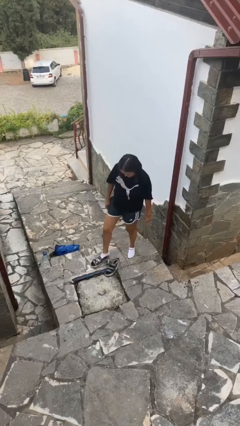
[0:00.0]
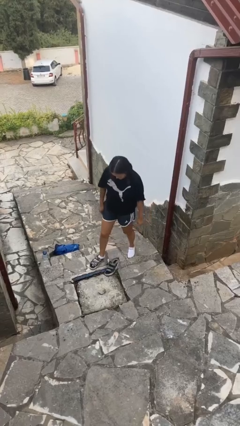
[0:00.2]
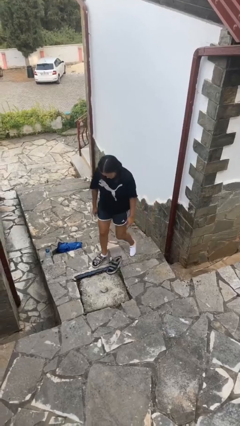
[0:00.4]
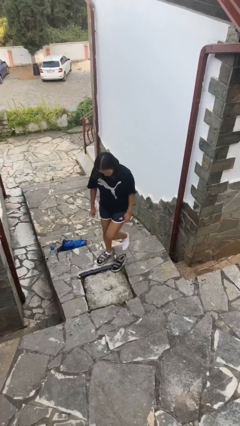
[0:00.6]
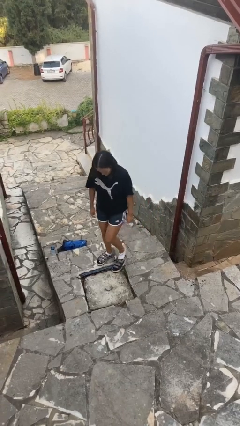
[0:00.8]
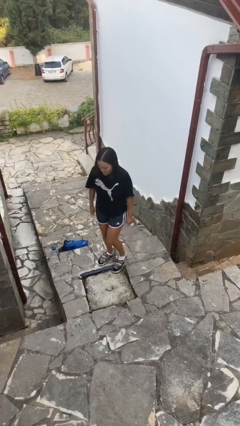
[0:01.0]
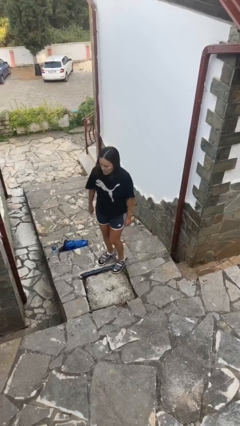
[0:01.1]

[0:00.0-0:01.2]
person puts on shoes

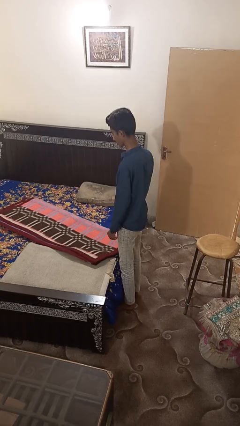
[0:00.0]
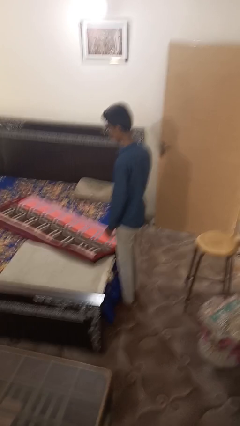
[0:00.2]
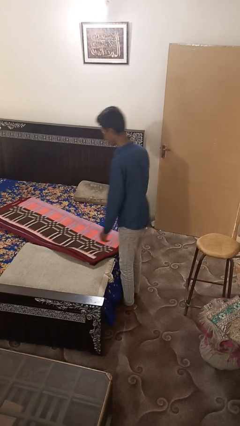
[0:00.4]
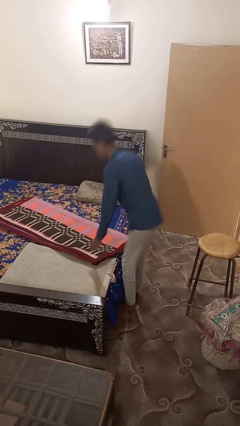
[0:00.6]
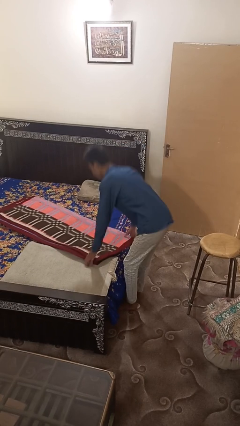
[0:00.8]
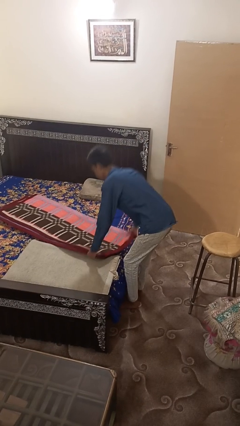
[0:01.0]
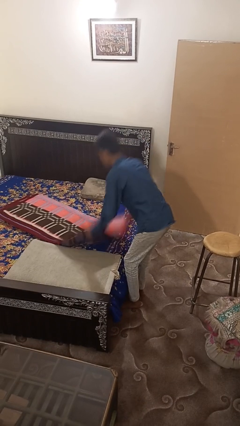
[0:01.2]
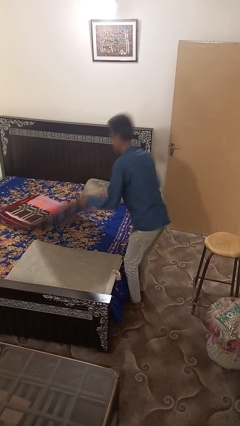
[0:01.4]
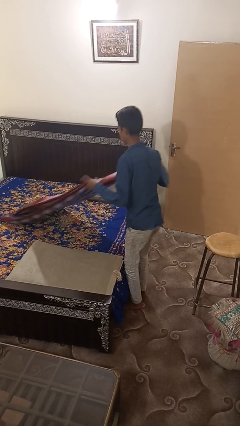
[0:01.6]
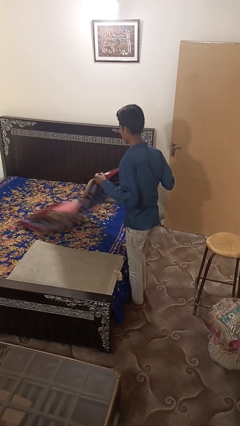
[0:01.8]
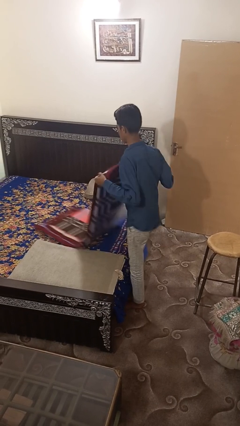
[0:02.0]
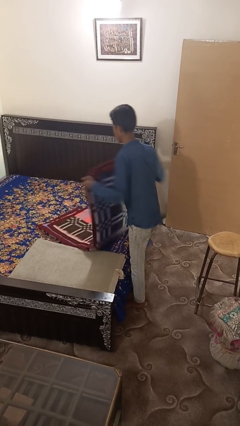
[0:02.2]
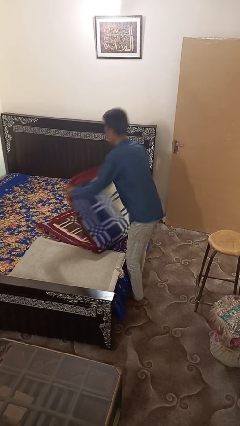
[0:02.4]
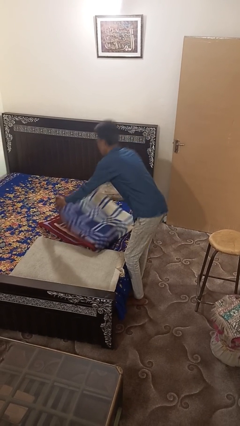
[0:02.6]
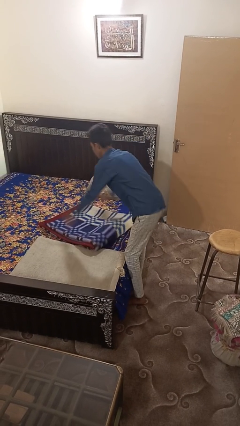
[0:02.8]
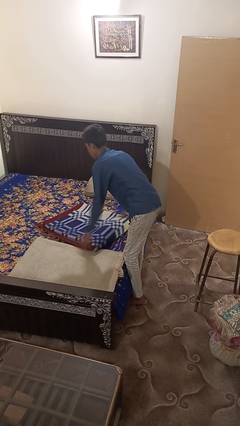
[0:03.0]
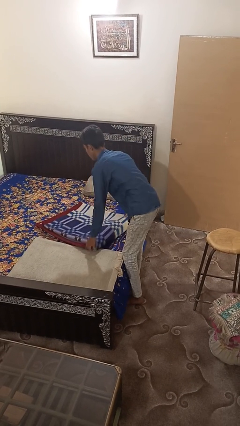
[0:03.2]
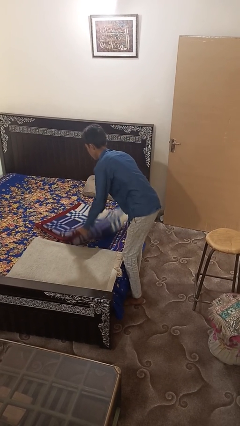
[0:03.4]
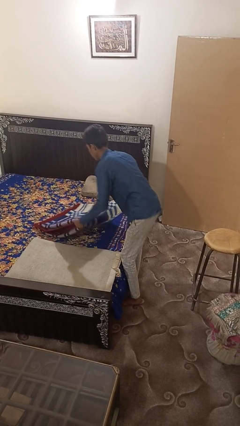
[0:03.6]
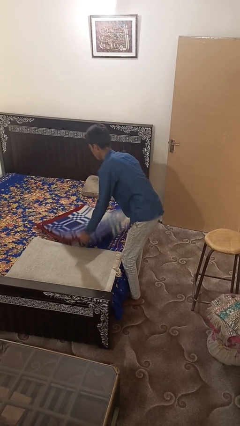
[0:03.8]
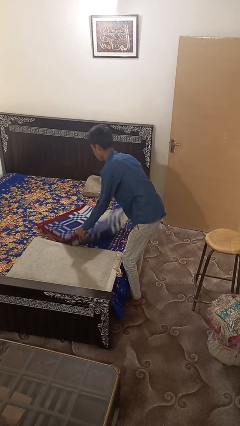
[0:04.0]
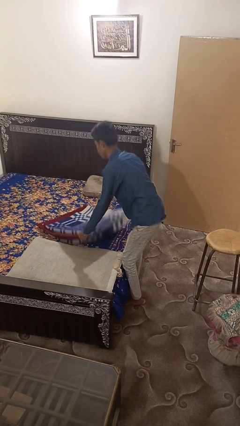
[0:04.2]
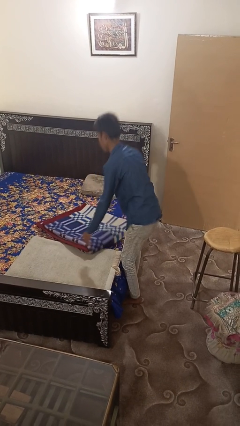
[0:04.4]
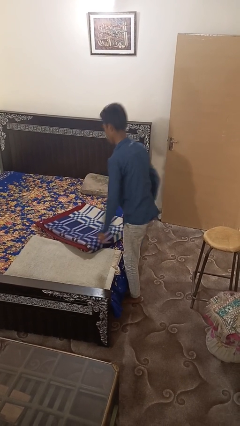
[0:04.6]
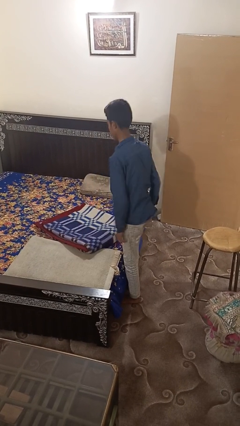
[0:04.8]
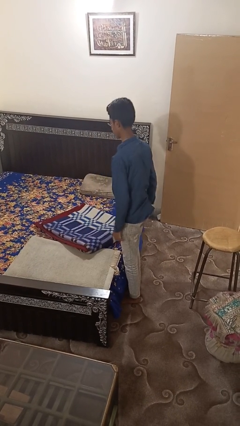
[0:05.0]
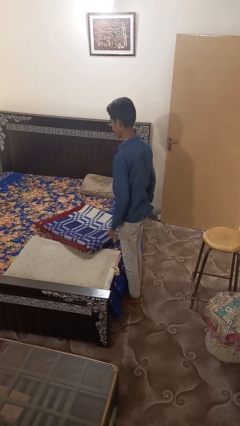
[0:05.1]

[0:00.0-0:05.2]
person folds blanket

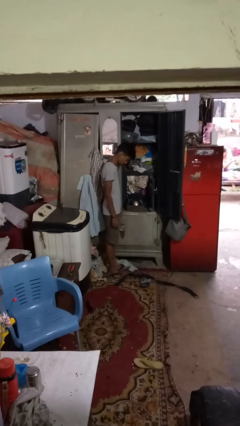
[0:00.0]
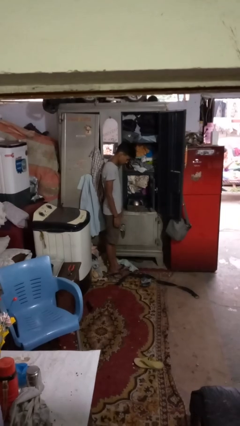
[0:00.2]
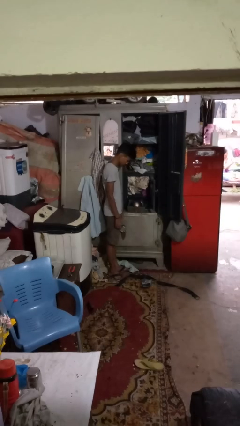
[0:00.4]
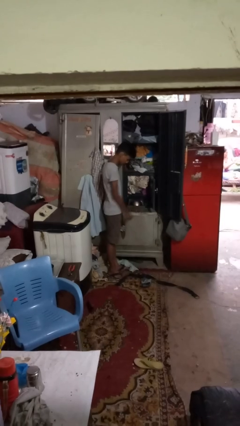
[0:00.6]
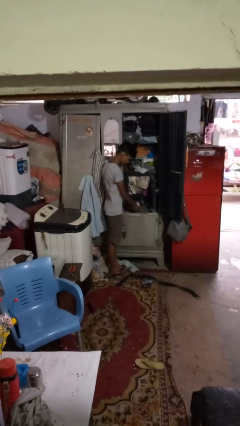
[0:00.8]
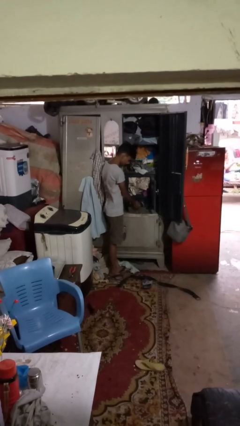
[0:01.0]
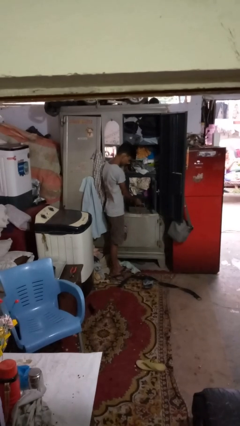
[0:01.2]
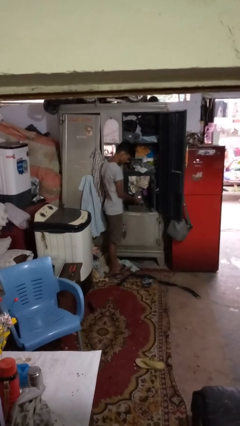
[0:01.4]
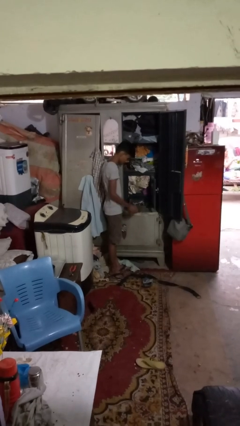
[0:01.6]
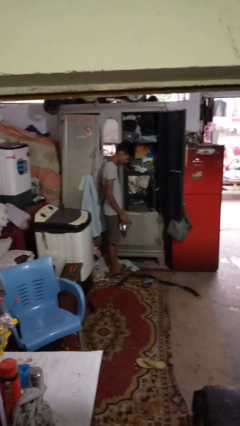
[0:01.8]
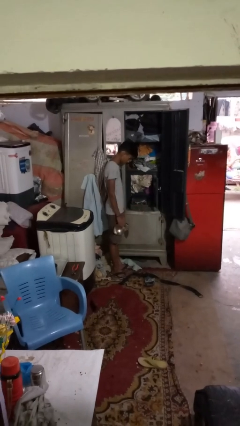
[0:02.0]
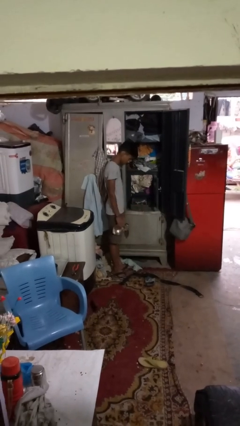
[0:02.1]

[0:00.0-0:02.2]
person takes clothes from dresser

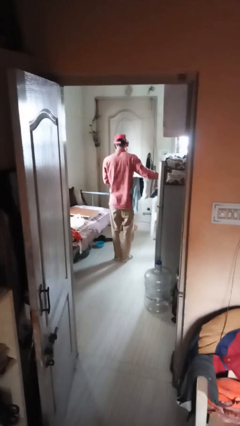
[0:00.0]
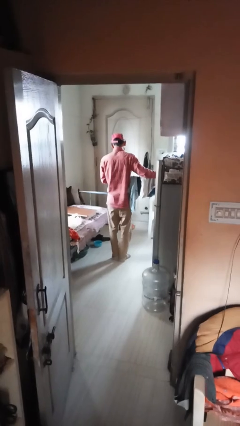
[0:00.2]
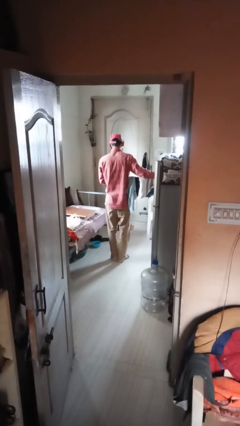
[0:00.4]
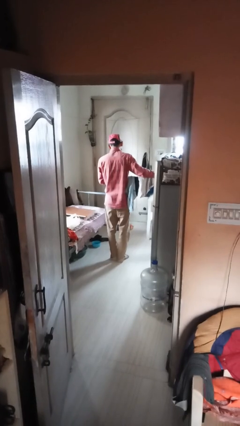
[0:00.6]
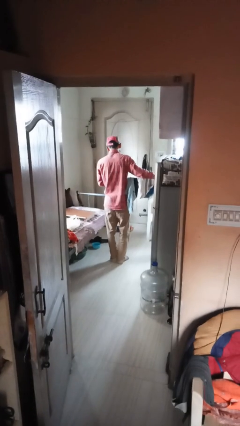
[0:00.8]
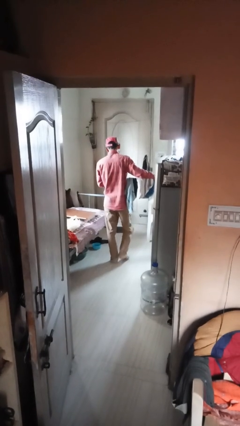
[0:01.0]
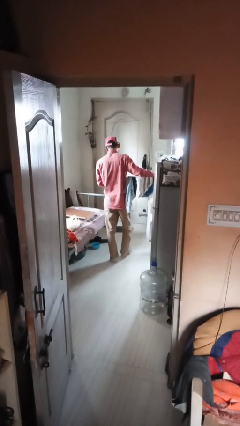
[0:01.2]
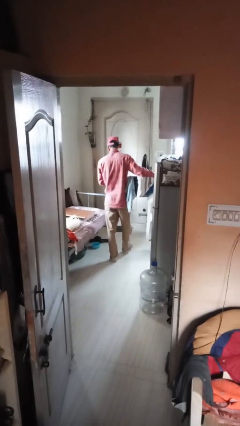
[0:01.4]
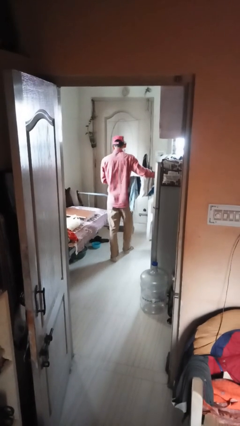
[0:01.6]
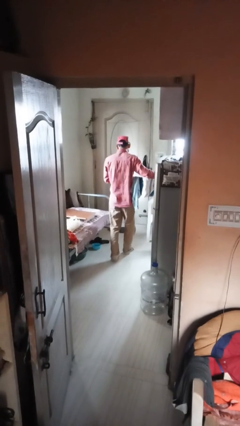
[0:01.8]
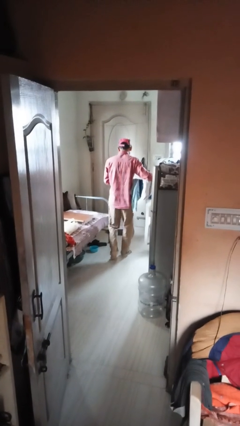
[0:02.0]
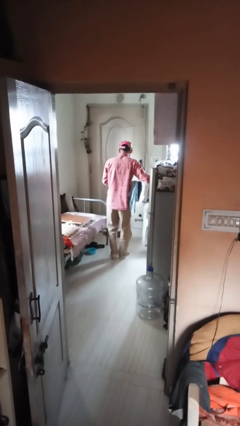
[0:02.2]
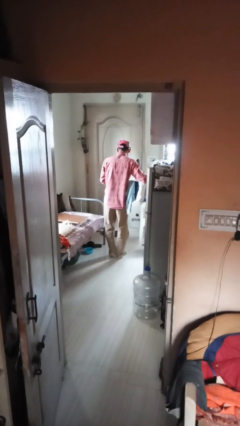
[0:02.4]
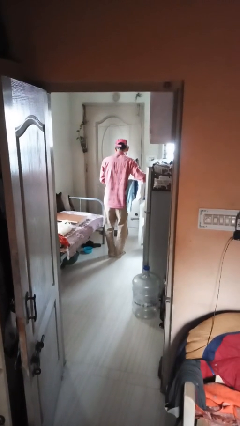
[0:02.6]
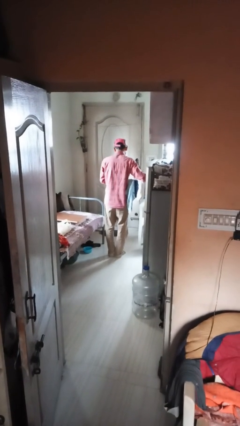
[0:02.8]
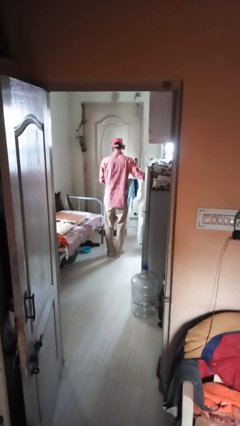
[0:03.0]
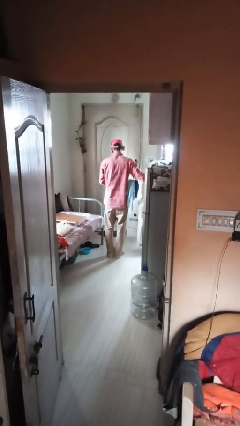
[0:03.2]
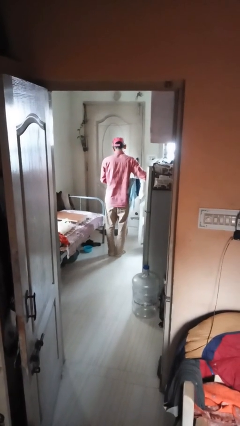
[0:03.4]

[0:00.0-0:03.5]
person carries laundry basket

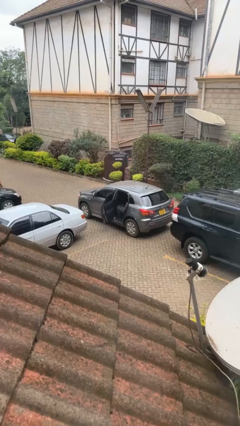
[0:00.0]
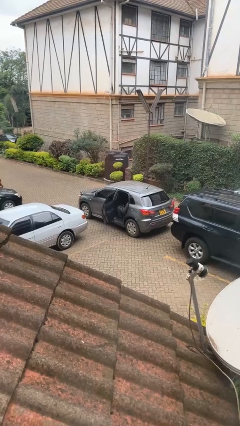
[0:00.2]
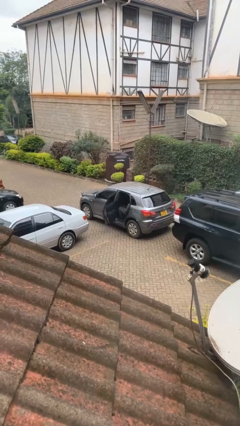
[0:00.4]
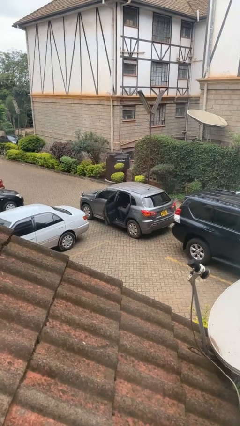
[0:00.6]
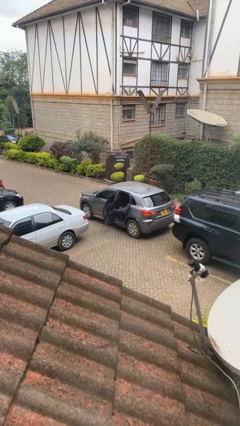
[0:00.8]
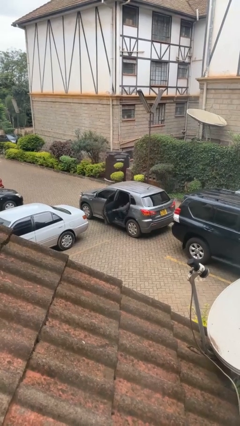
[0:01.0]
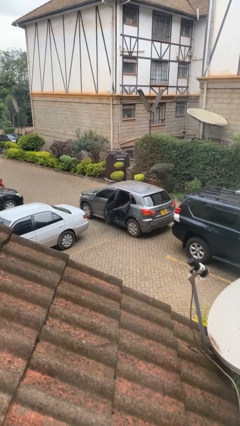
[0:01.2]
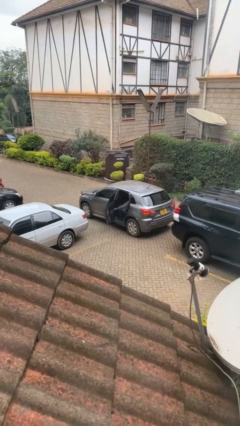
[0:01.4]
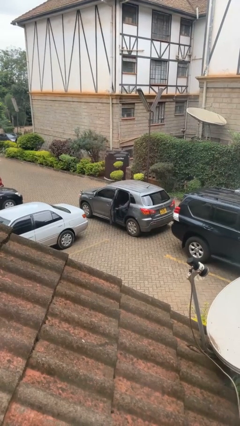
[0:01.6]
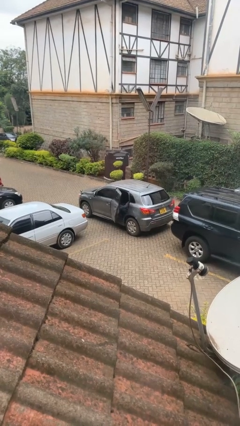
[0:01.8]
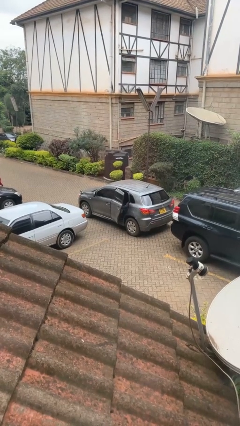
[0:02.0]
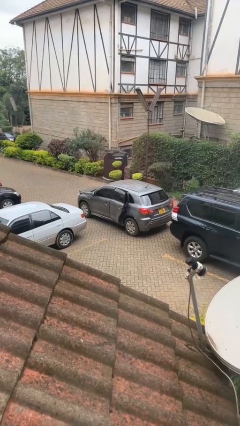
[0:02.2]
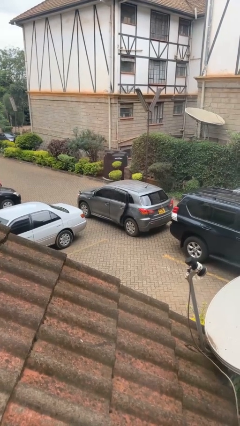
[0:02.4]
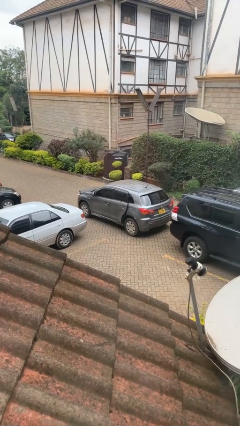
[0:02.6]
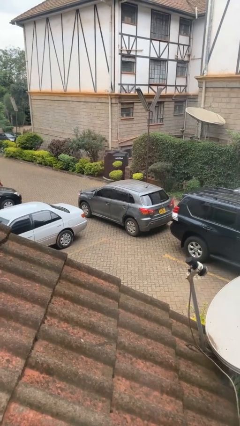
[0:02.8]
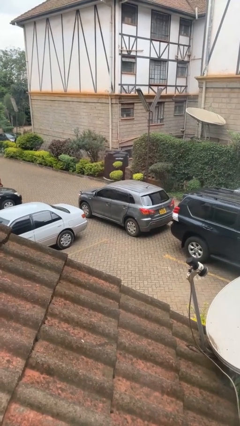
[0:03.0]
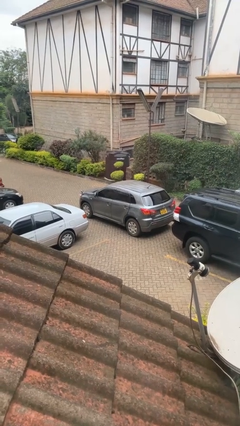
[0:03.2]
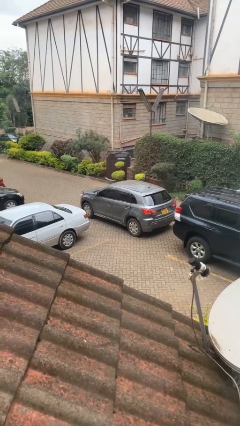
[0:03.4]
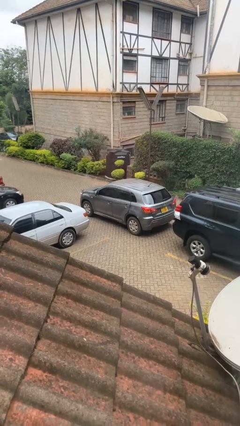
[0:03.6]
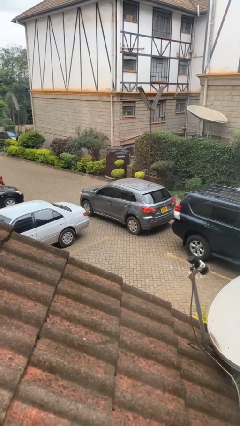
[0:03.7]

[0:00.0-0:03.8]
person closes car door

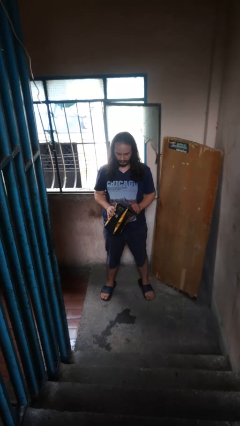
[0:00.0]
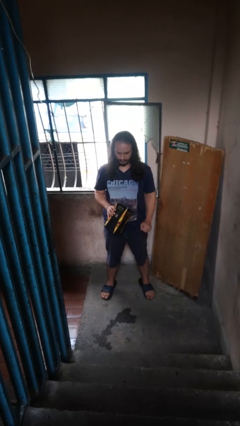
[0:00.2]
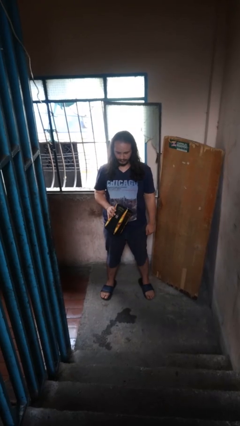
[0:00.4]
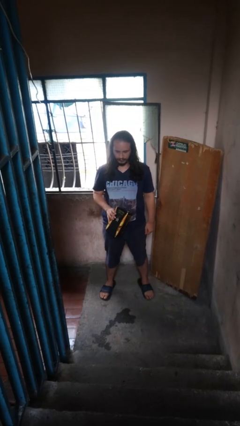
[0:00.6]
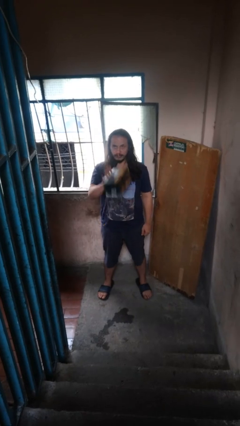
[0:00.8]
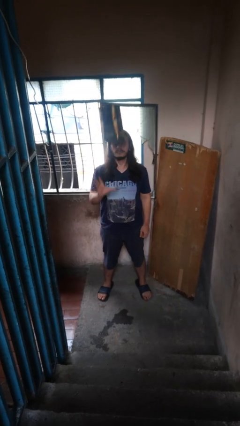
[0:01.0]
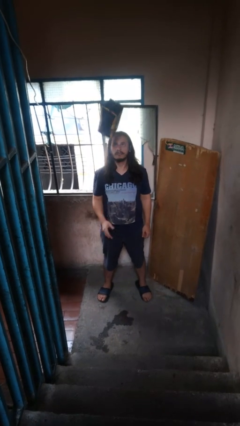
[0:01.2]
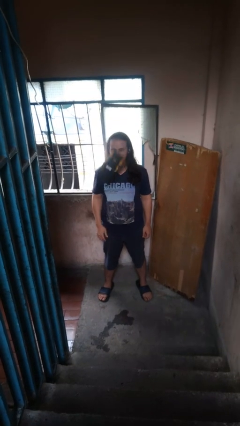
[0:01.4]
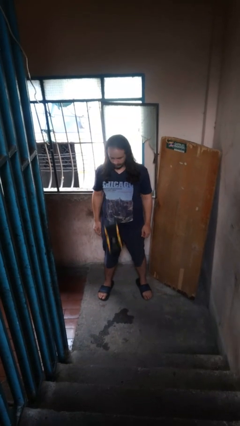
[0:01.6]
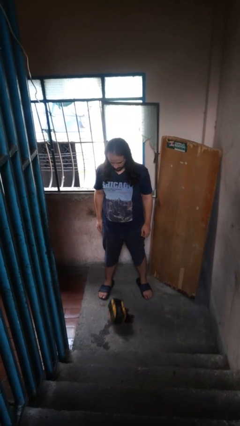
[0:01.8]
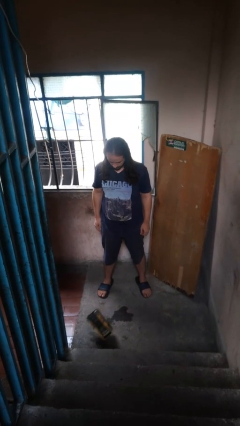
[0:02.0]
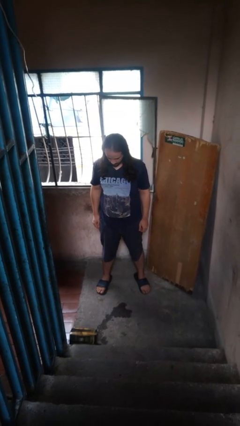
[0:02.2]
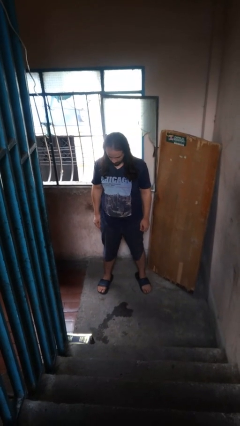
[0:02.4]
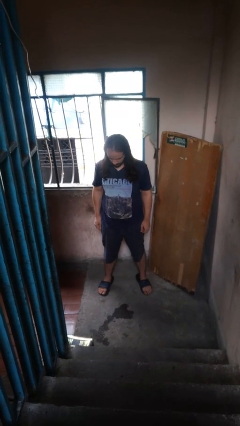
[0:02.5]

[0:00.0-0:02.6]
person throws object into air
